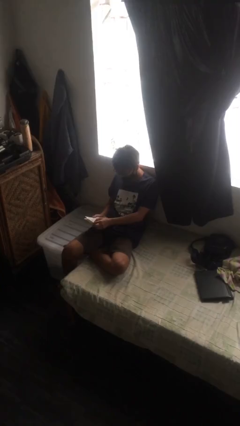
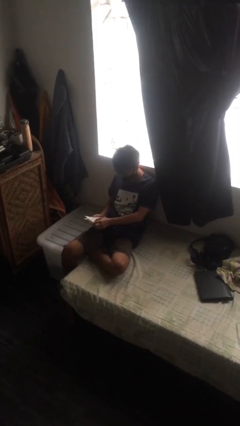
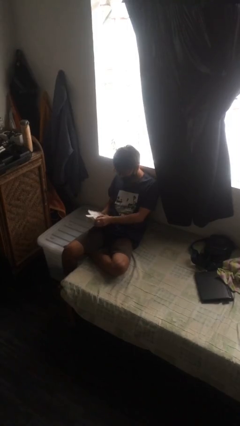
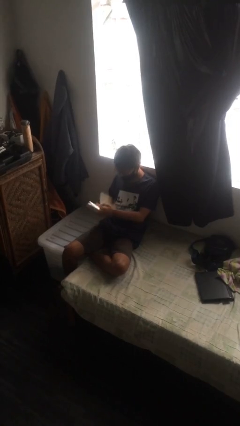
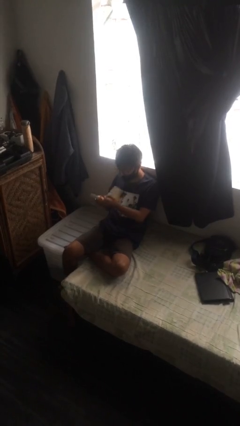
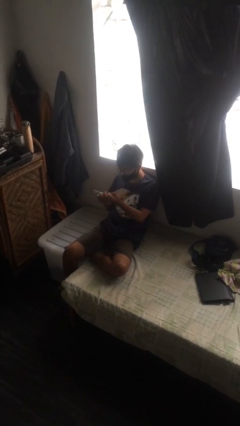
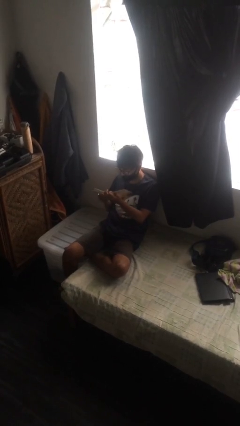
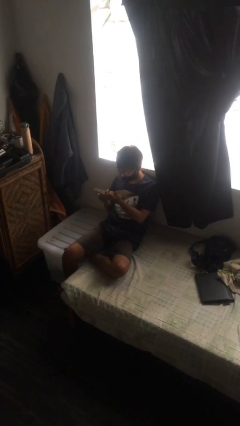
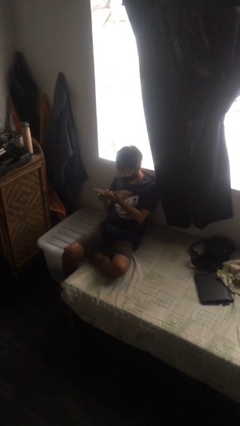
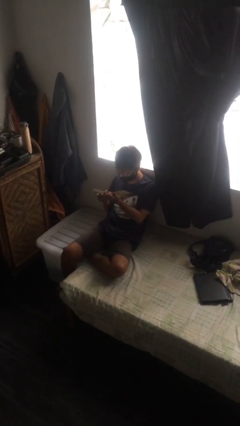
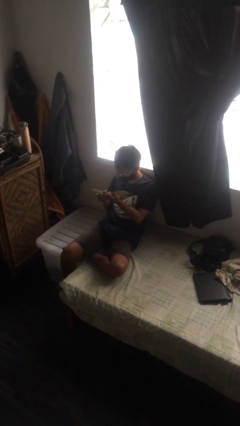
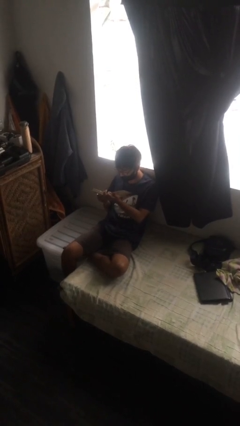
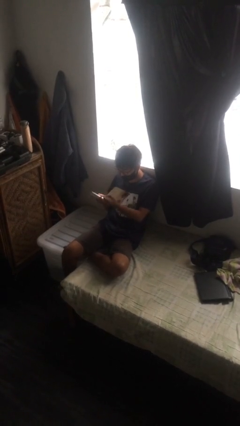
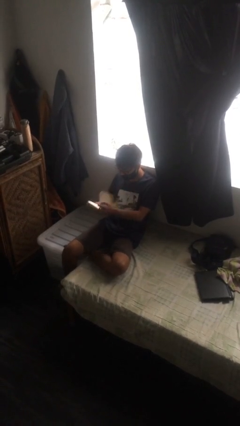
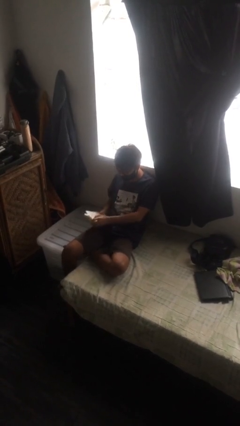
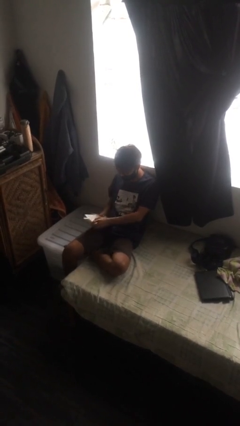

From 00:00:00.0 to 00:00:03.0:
person reads document

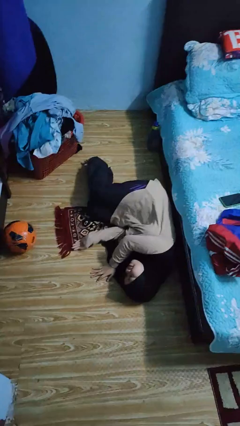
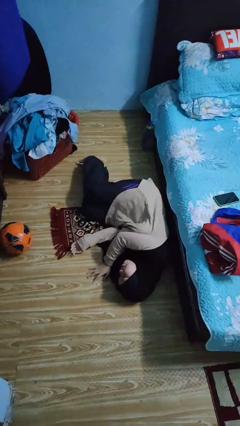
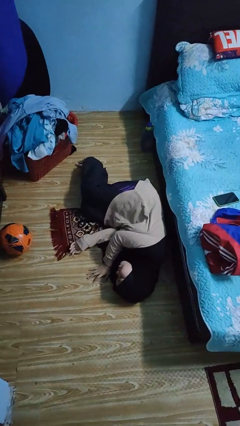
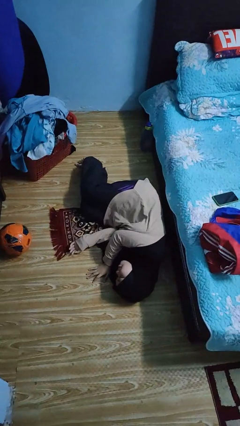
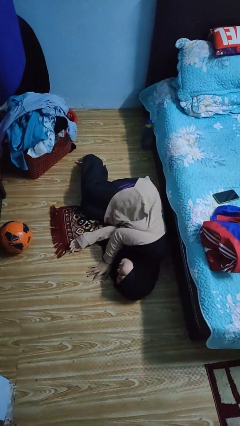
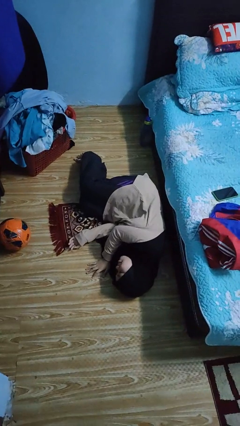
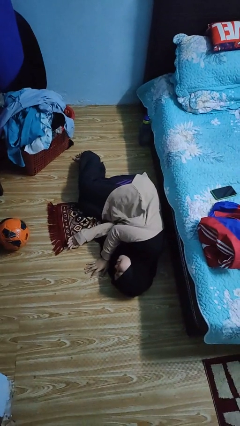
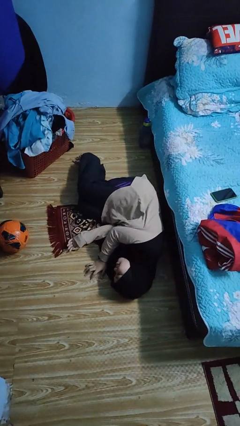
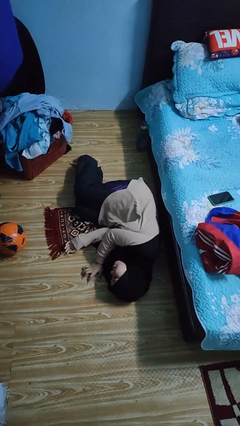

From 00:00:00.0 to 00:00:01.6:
person lies down on floor

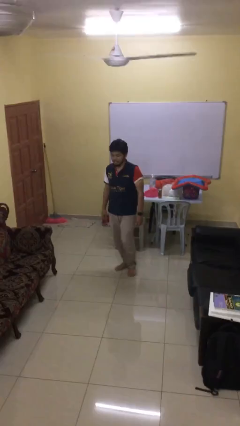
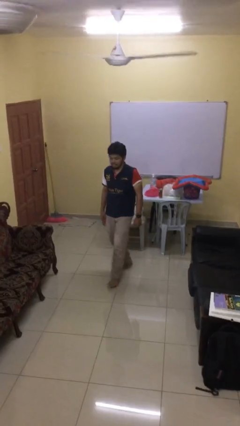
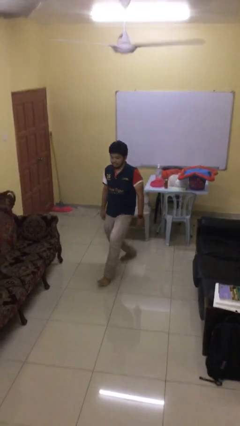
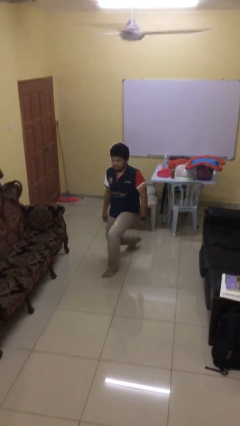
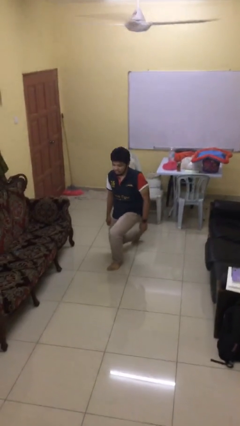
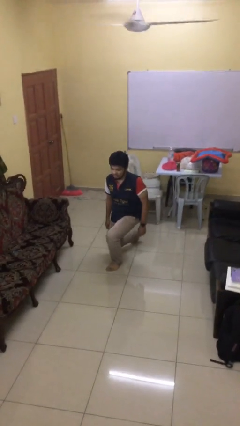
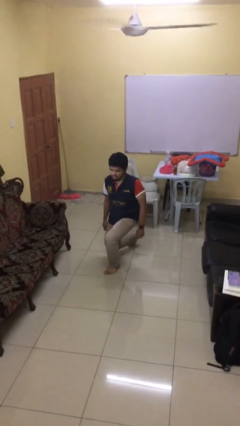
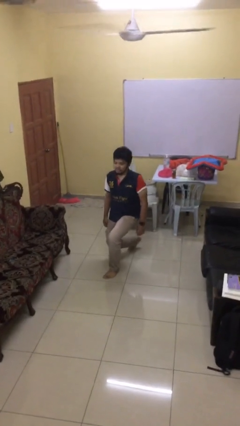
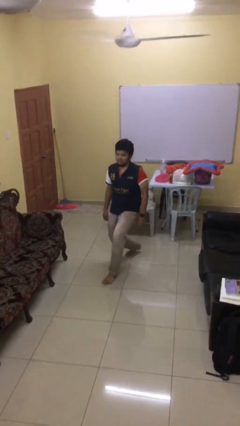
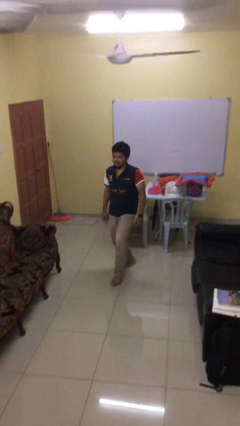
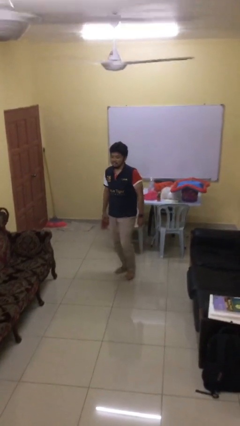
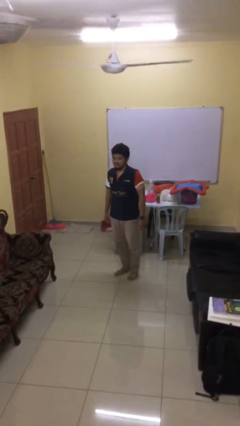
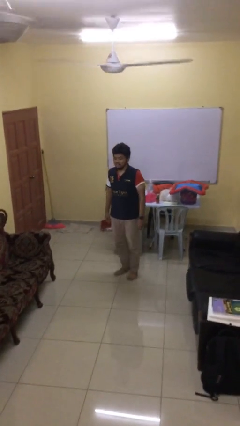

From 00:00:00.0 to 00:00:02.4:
person exercises with lunges

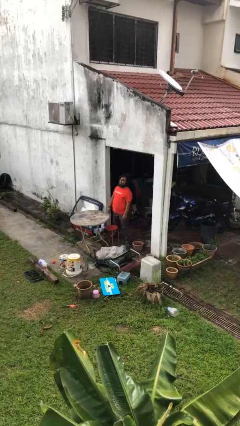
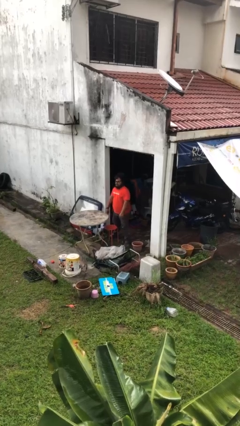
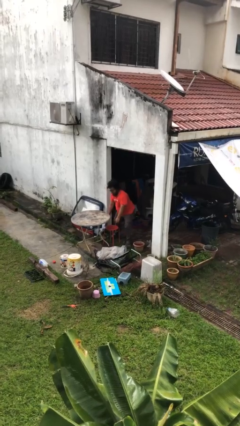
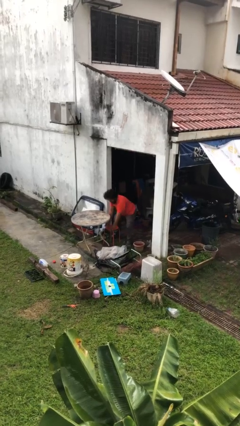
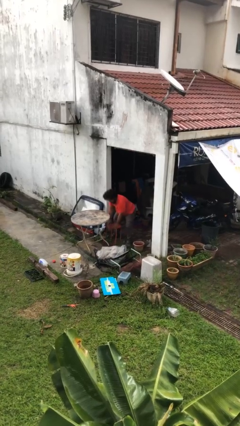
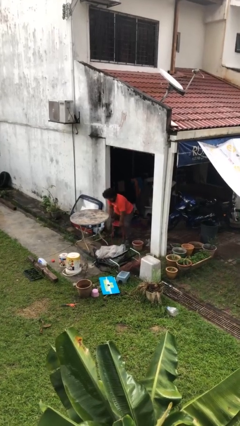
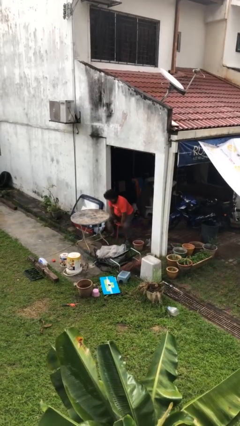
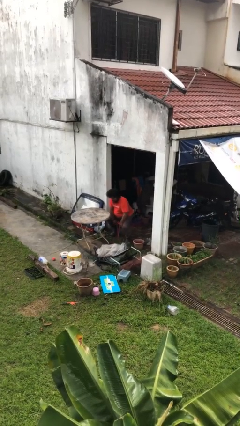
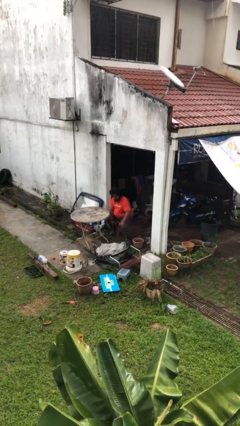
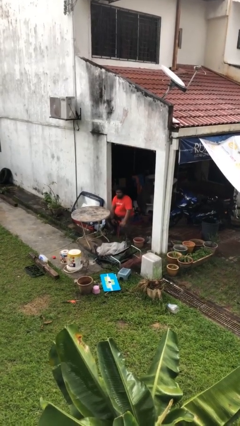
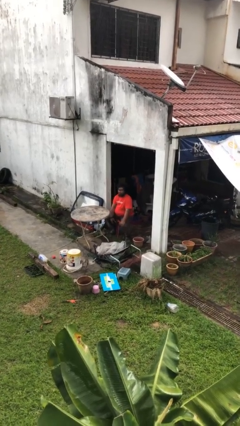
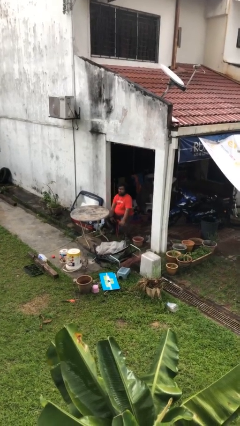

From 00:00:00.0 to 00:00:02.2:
person sits down

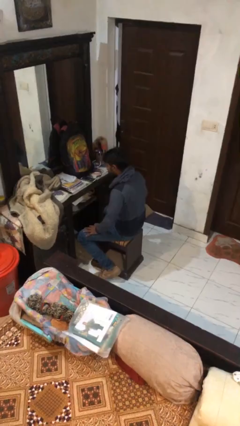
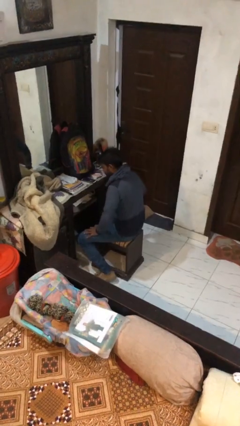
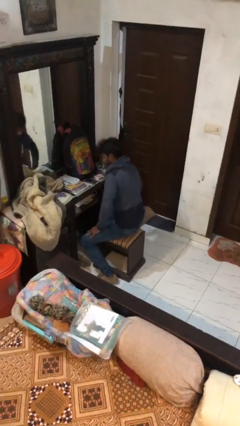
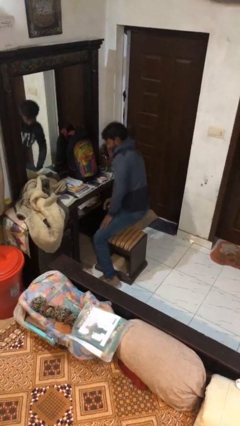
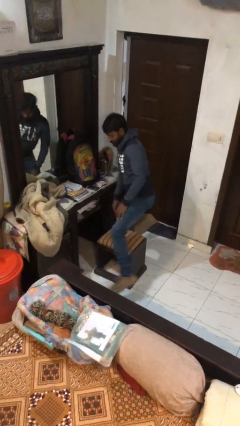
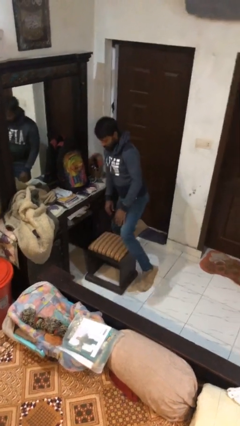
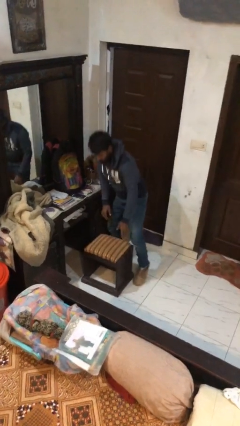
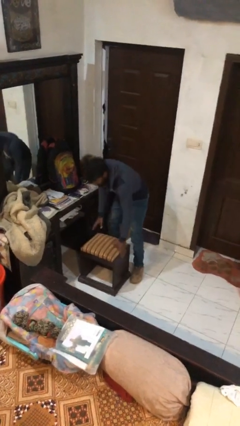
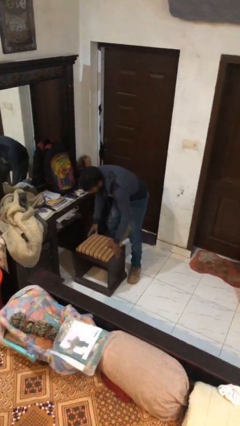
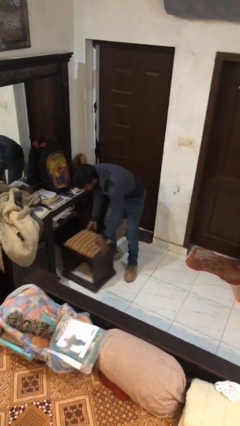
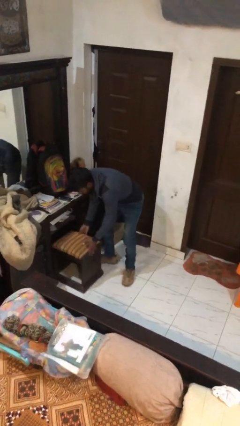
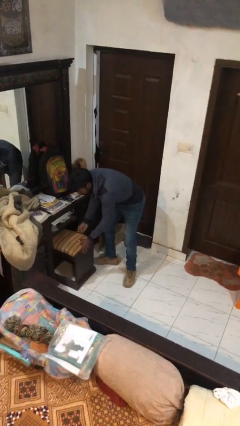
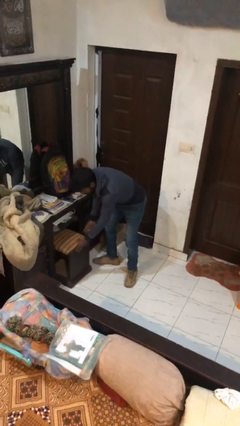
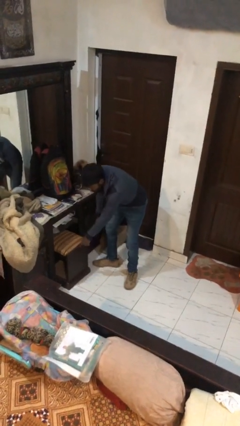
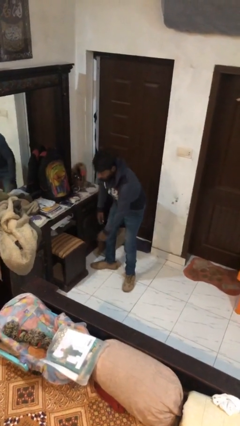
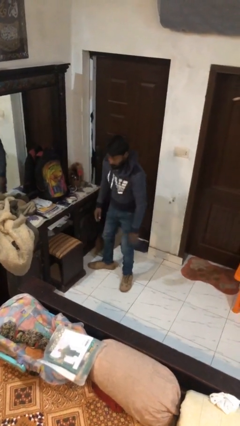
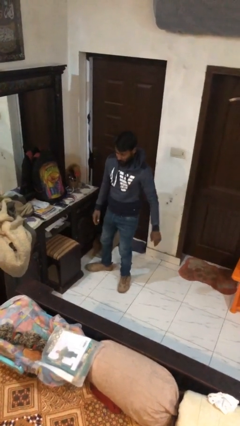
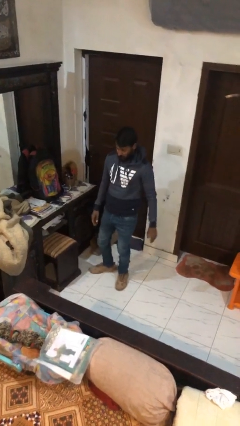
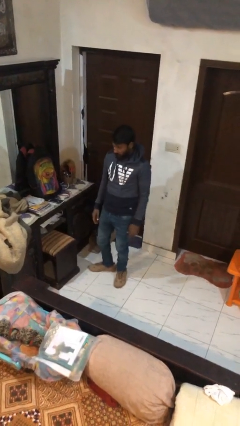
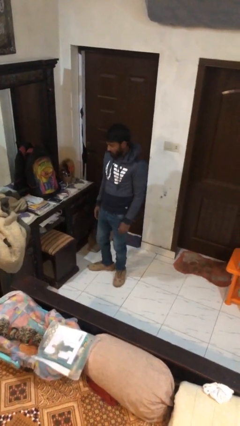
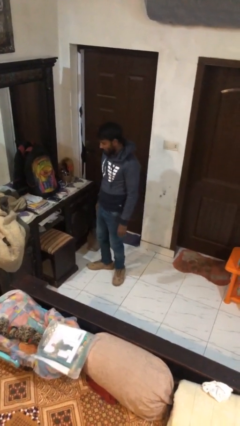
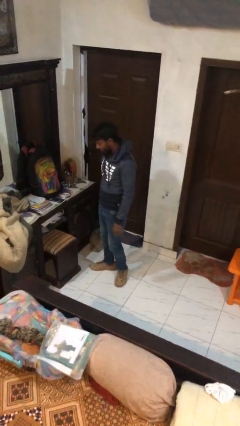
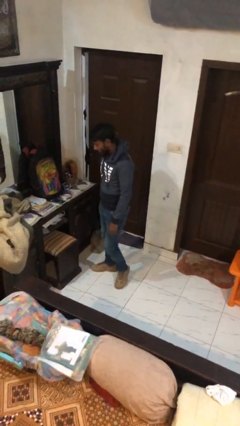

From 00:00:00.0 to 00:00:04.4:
person stands up

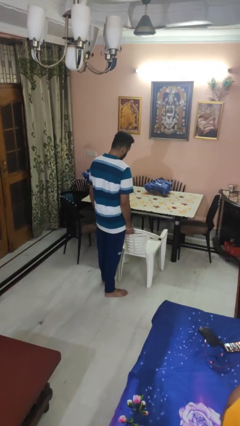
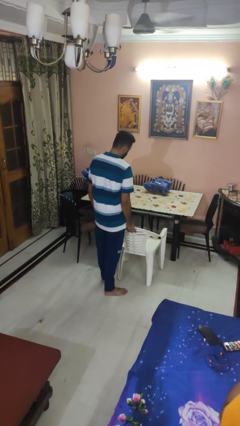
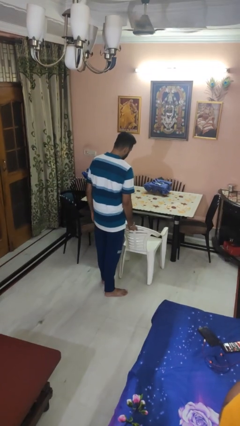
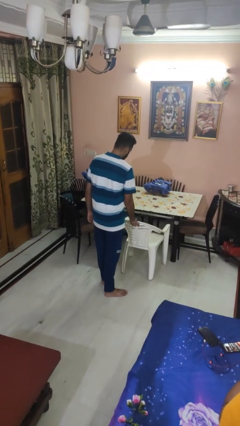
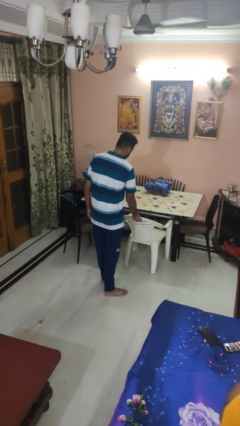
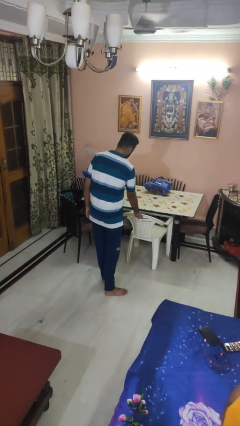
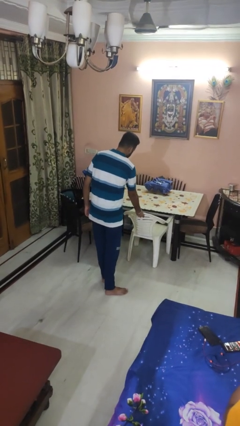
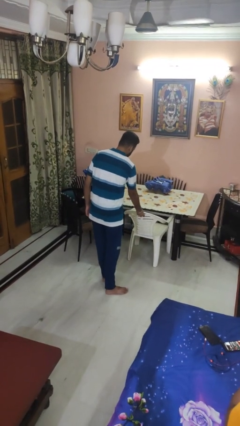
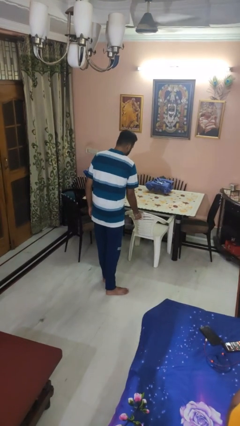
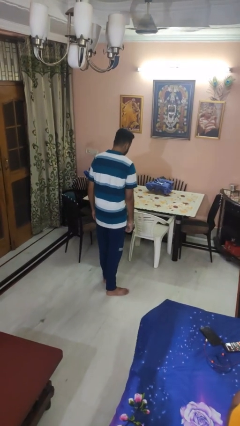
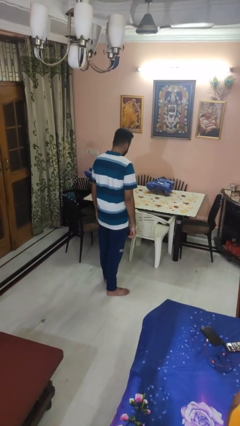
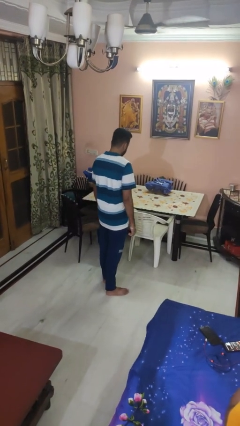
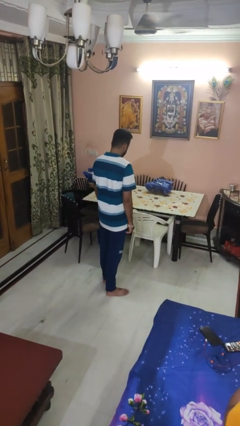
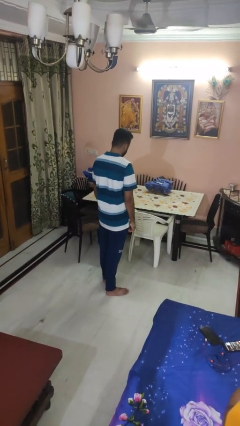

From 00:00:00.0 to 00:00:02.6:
person pushes in chair

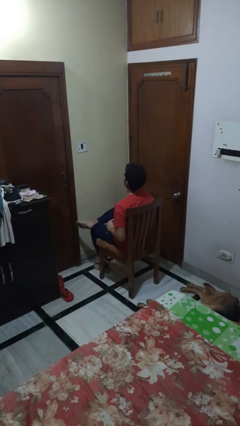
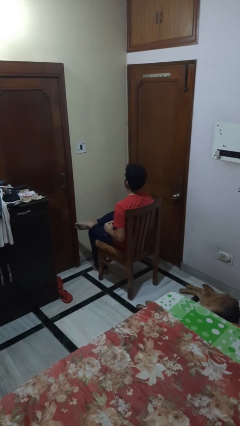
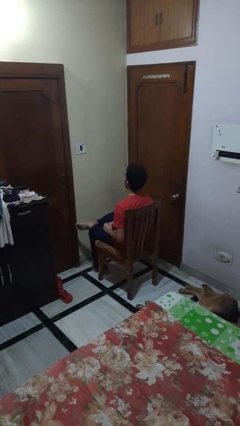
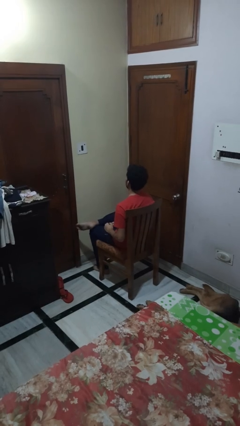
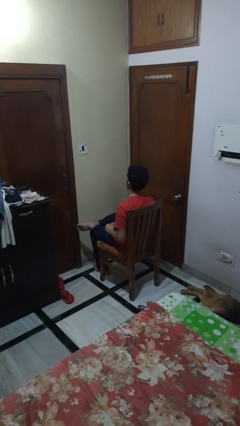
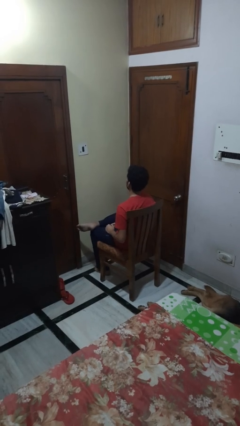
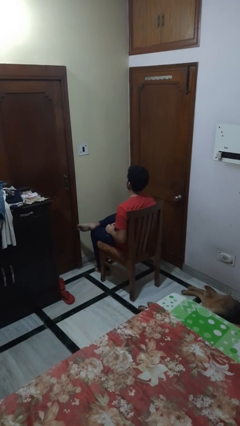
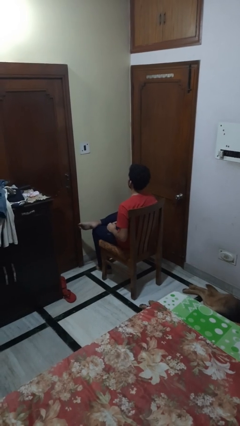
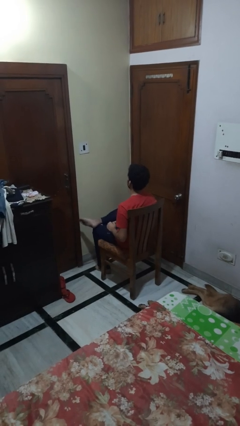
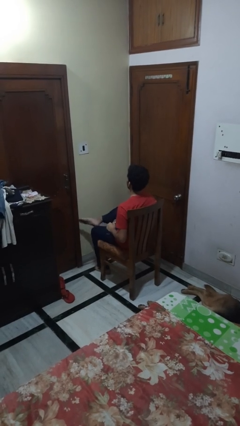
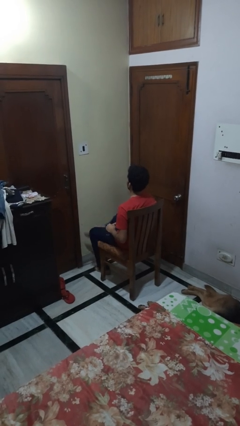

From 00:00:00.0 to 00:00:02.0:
person crosses legs
